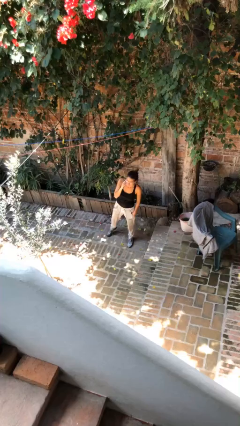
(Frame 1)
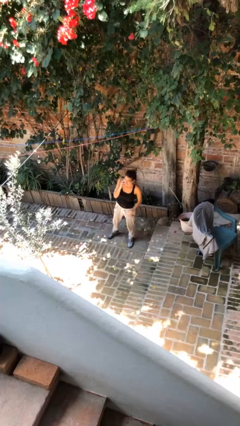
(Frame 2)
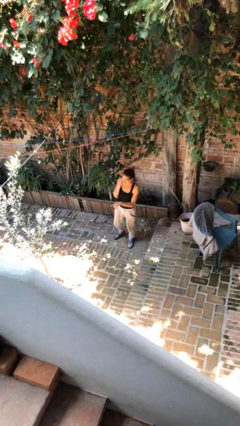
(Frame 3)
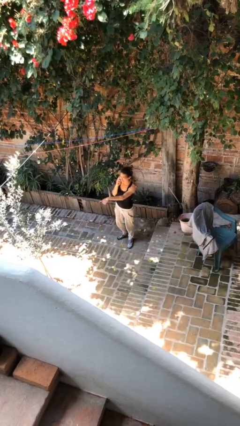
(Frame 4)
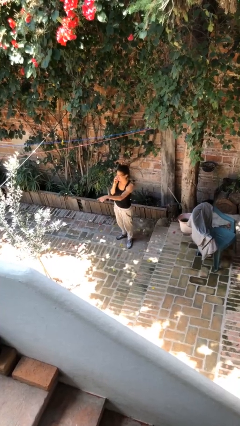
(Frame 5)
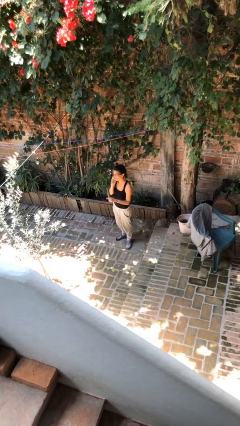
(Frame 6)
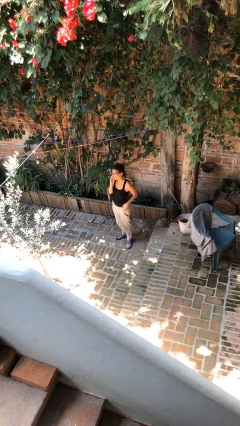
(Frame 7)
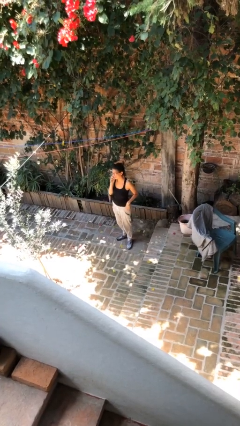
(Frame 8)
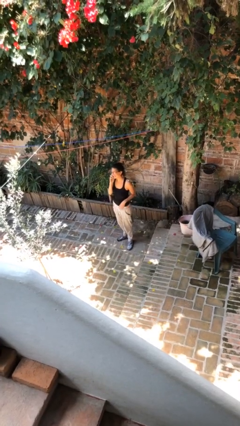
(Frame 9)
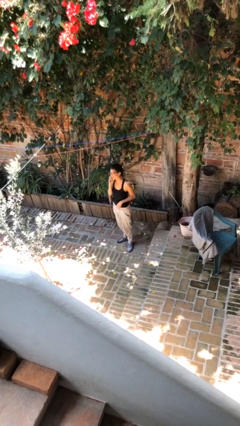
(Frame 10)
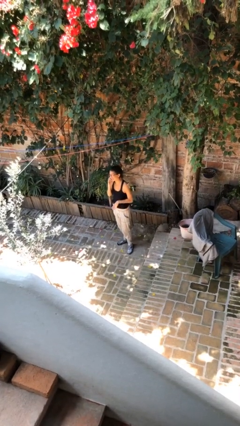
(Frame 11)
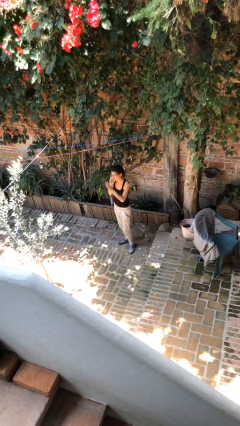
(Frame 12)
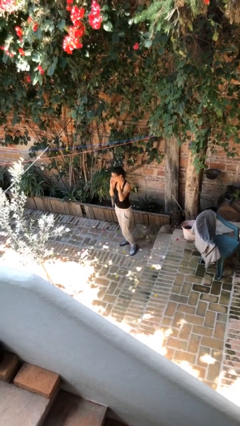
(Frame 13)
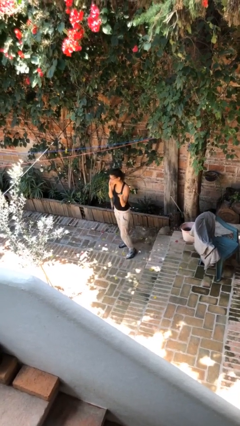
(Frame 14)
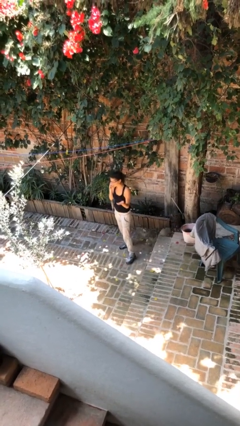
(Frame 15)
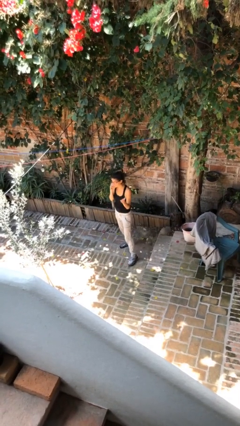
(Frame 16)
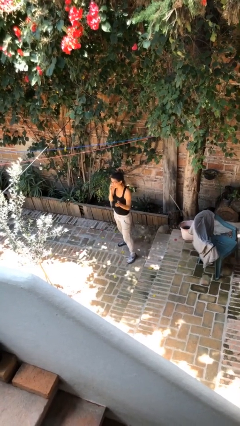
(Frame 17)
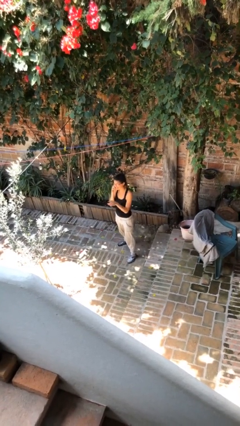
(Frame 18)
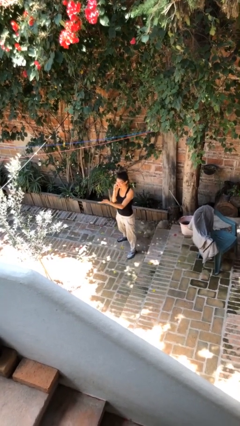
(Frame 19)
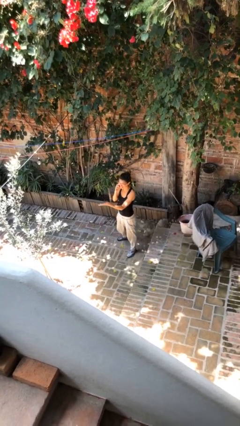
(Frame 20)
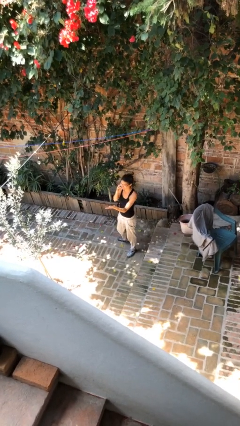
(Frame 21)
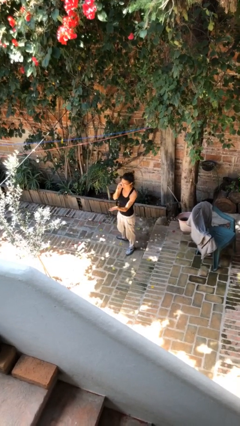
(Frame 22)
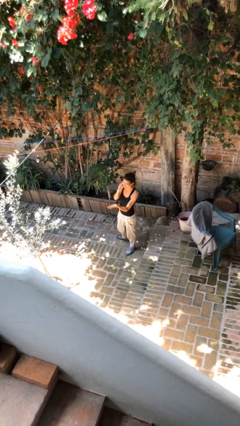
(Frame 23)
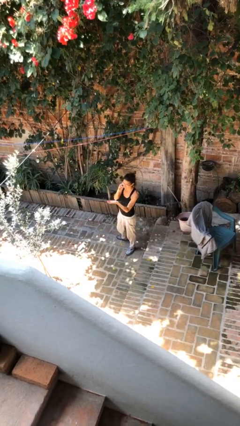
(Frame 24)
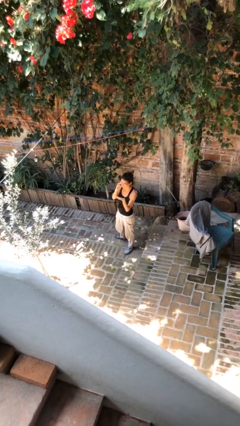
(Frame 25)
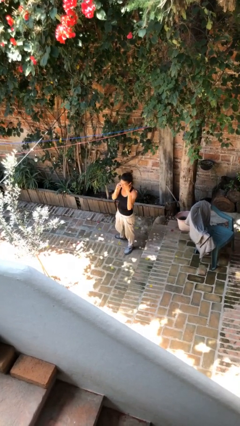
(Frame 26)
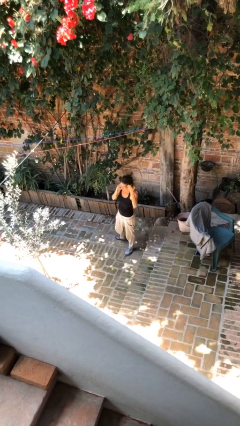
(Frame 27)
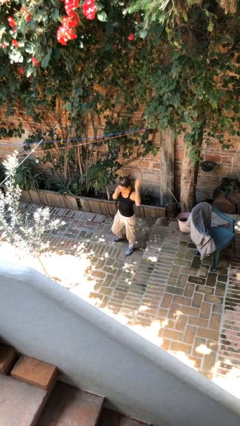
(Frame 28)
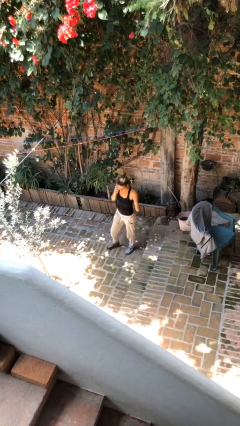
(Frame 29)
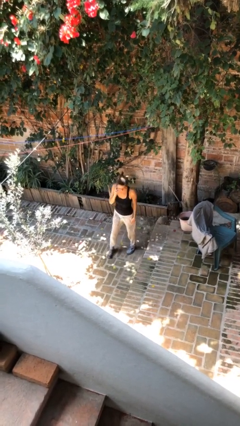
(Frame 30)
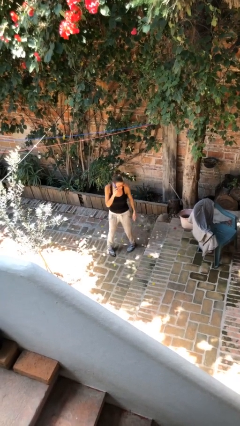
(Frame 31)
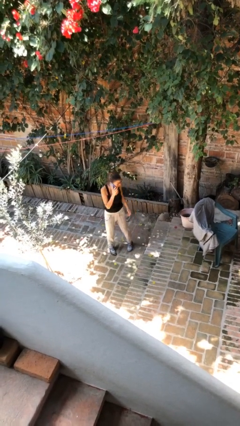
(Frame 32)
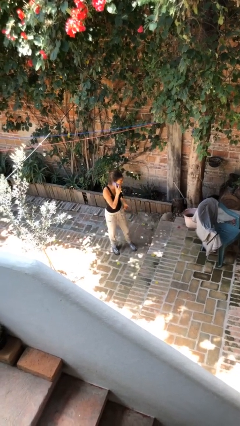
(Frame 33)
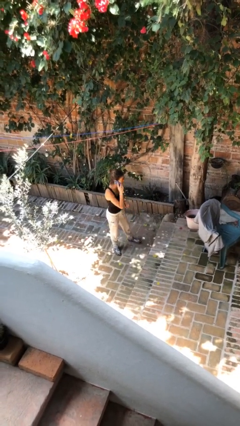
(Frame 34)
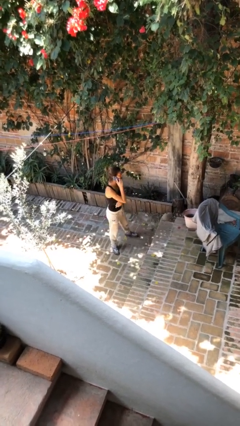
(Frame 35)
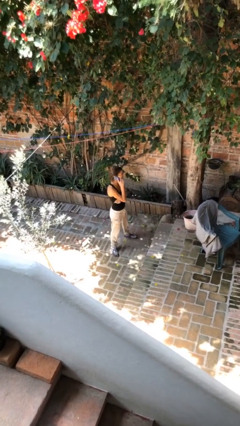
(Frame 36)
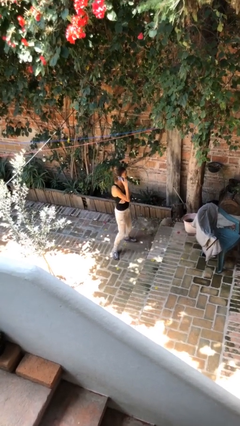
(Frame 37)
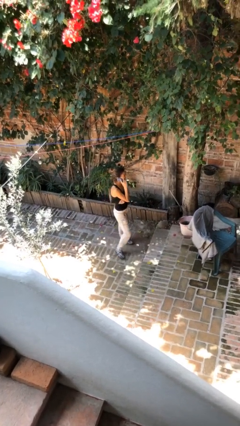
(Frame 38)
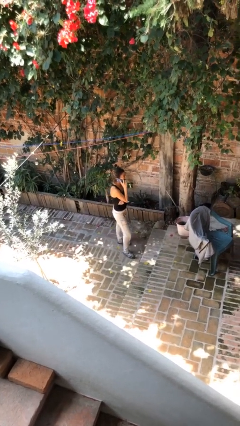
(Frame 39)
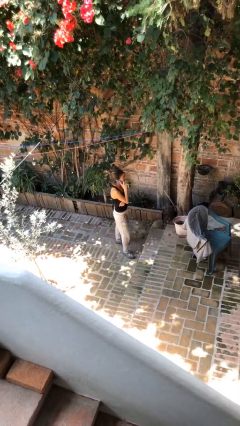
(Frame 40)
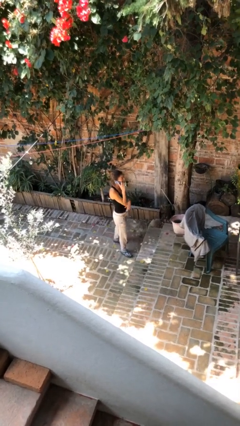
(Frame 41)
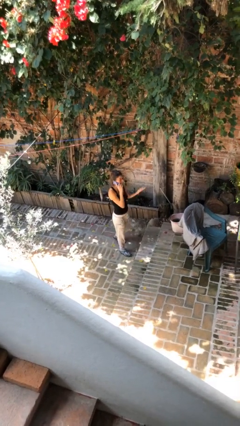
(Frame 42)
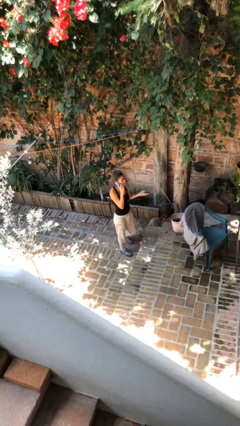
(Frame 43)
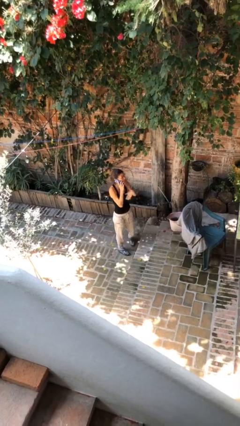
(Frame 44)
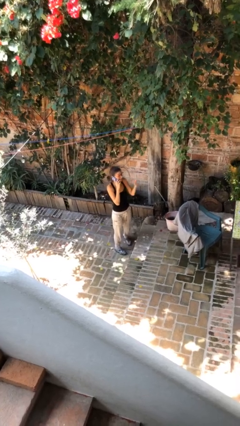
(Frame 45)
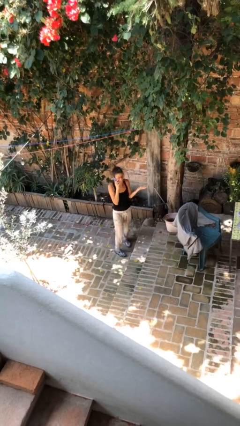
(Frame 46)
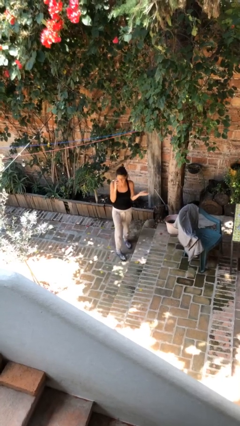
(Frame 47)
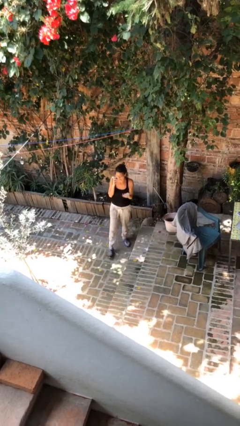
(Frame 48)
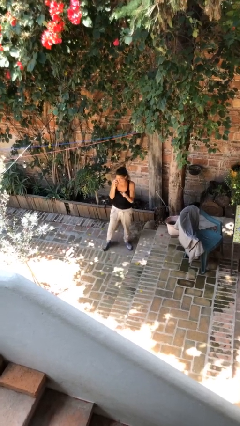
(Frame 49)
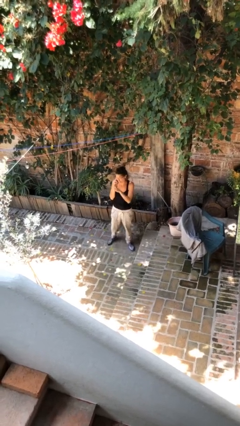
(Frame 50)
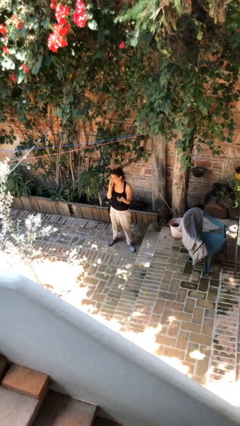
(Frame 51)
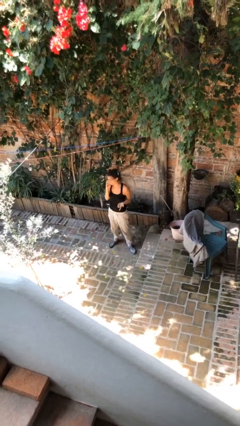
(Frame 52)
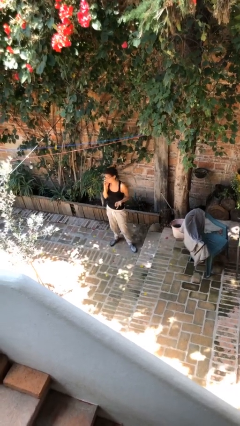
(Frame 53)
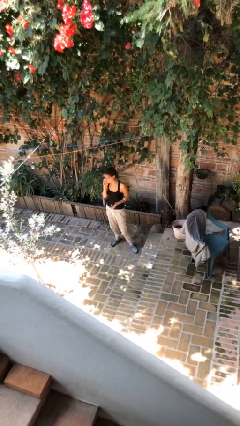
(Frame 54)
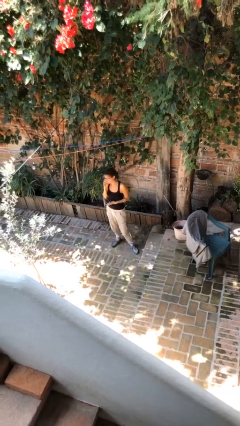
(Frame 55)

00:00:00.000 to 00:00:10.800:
person talks on phone

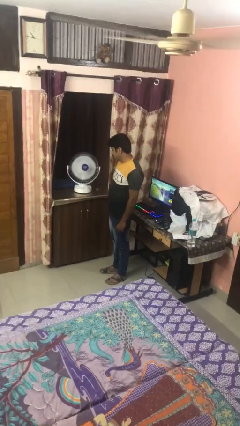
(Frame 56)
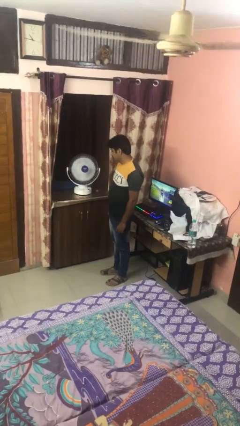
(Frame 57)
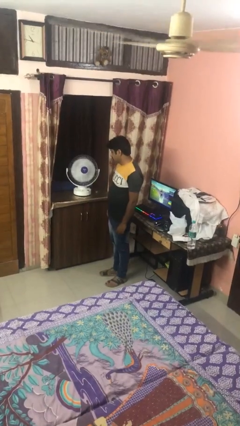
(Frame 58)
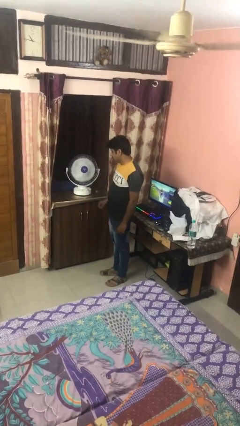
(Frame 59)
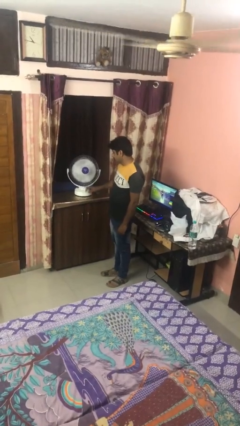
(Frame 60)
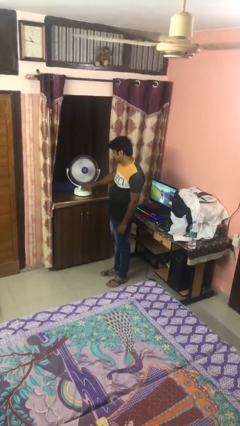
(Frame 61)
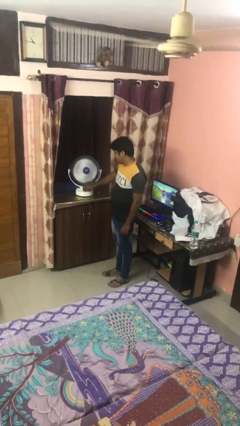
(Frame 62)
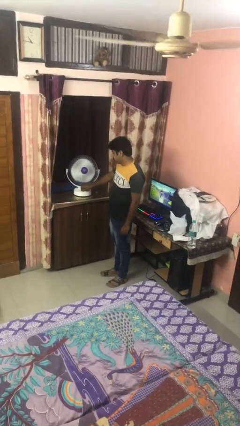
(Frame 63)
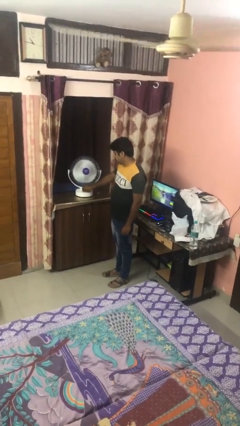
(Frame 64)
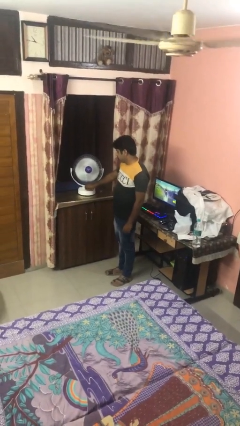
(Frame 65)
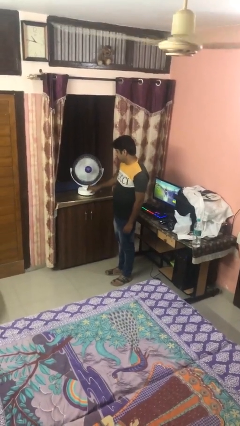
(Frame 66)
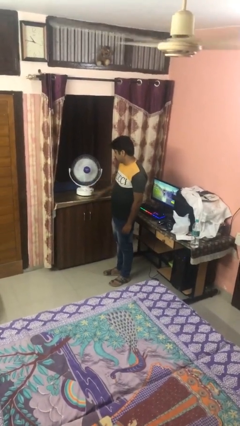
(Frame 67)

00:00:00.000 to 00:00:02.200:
person turns on fan

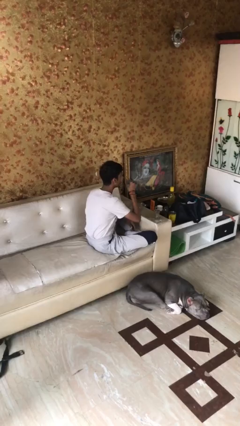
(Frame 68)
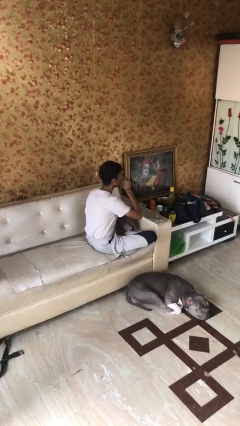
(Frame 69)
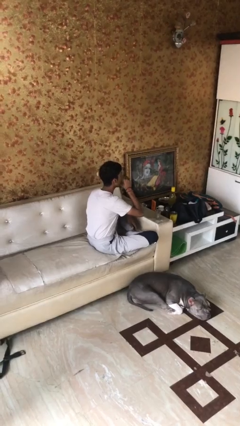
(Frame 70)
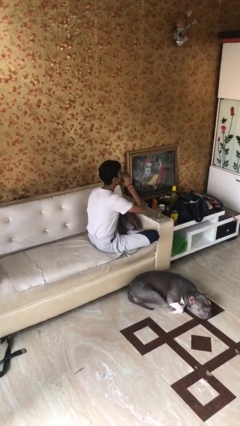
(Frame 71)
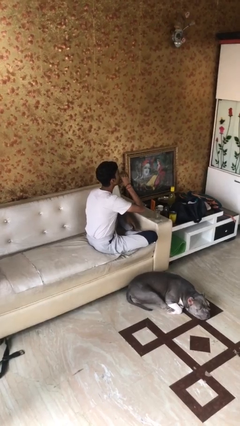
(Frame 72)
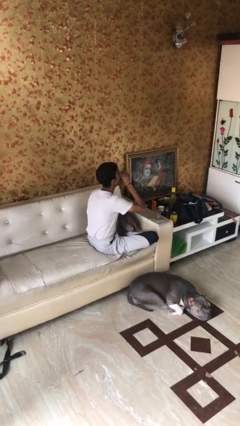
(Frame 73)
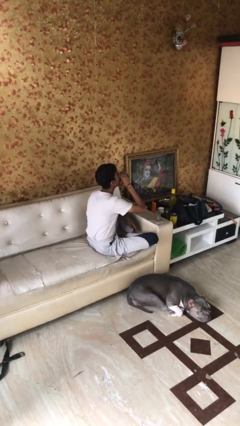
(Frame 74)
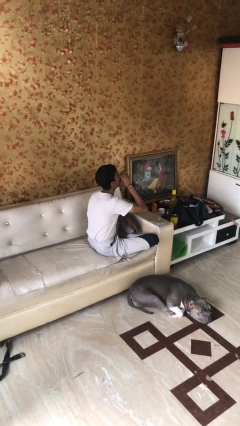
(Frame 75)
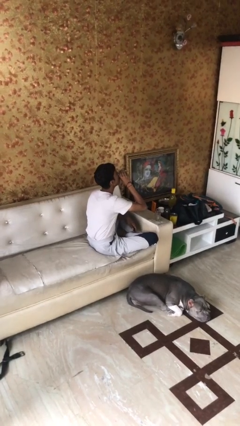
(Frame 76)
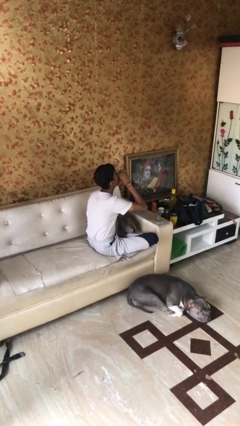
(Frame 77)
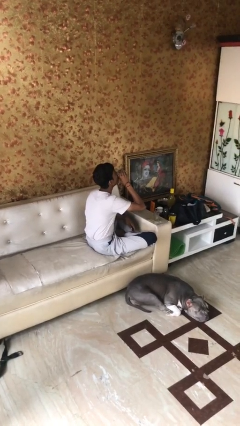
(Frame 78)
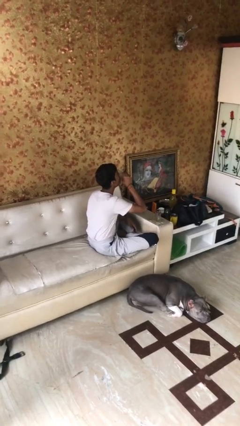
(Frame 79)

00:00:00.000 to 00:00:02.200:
person drinks from shotglass

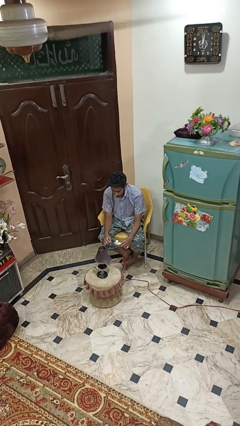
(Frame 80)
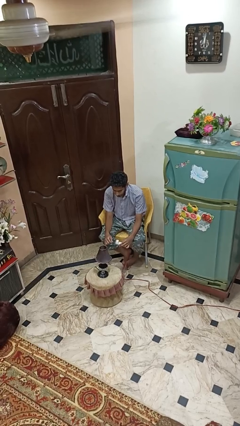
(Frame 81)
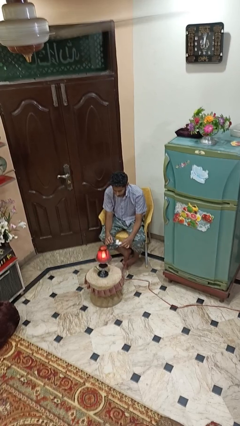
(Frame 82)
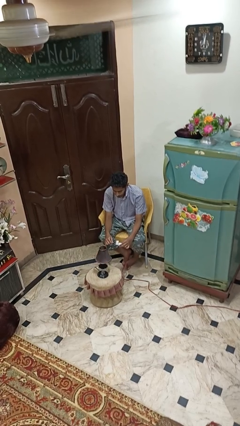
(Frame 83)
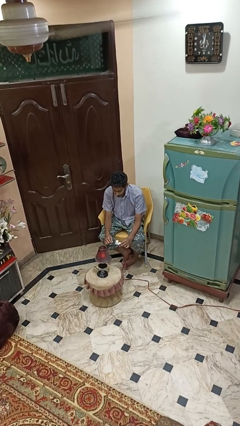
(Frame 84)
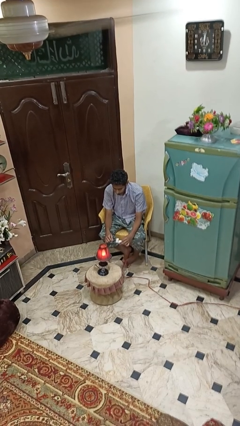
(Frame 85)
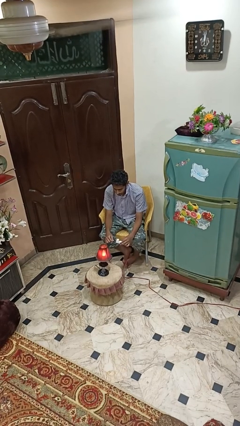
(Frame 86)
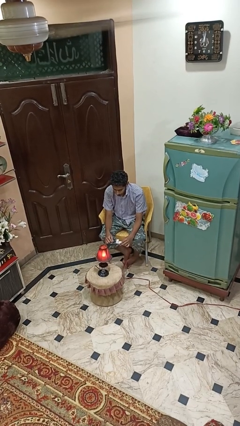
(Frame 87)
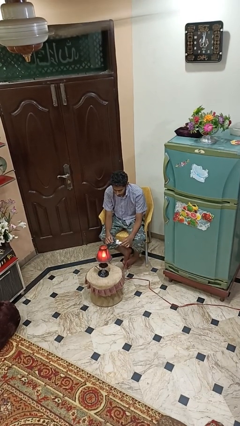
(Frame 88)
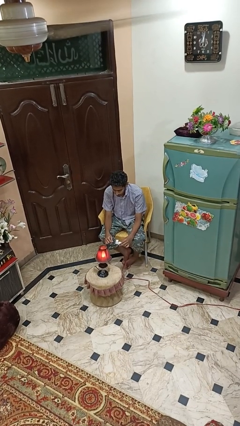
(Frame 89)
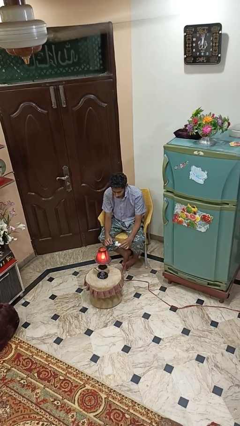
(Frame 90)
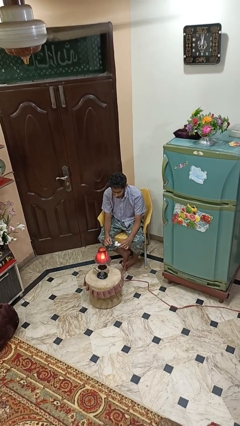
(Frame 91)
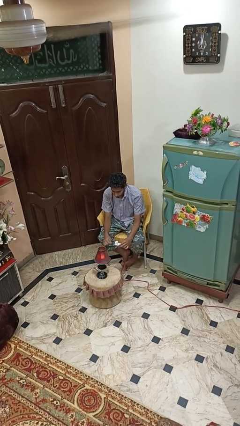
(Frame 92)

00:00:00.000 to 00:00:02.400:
person turns on lamp

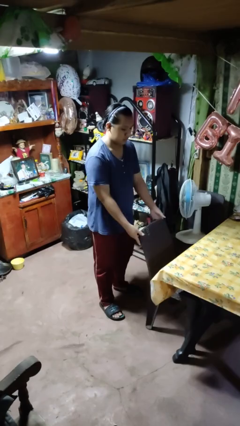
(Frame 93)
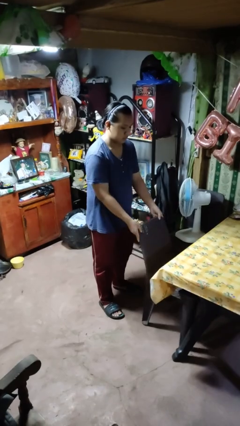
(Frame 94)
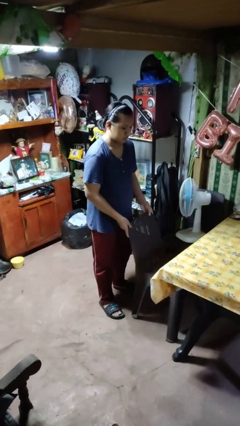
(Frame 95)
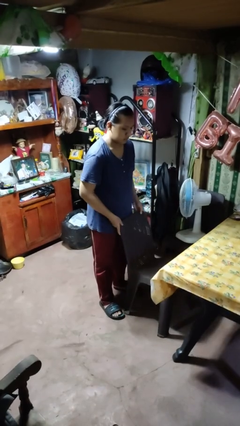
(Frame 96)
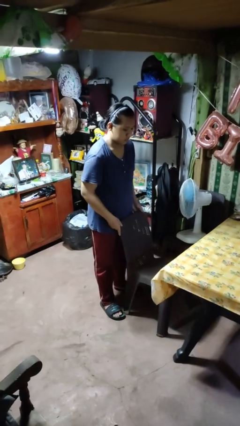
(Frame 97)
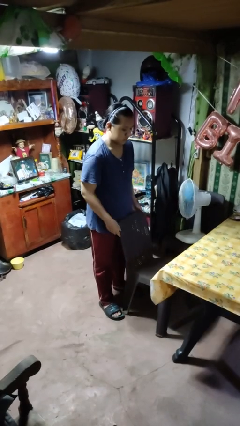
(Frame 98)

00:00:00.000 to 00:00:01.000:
person pulls out chair
